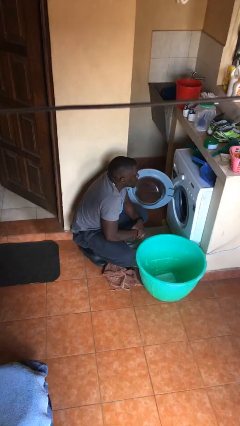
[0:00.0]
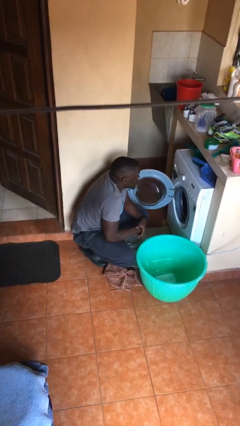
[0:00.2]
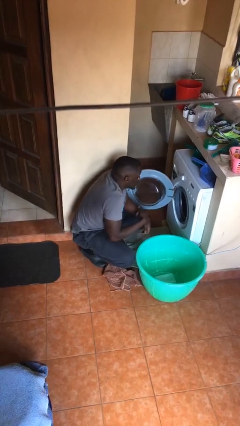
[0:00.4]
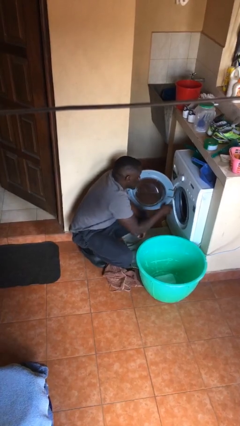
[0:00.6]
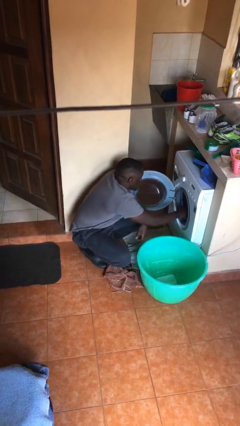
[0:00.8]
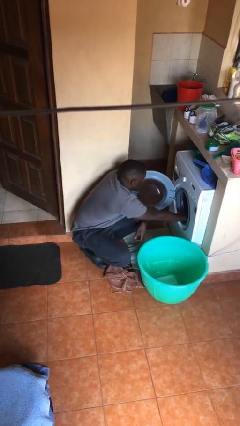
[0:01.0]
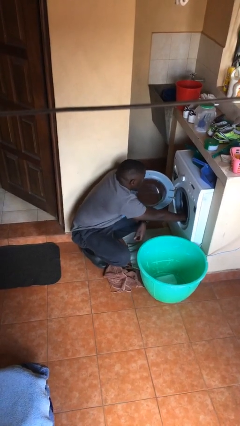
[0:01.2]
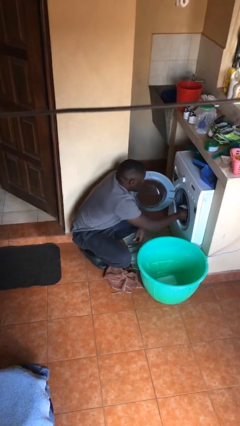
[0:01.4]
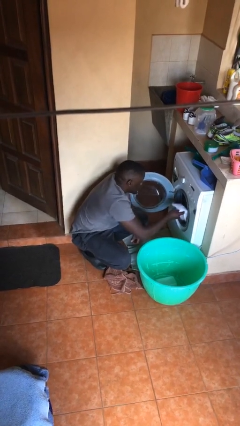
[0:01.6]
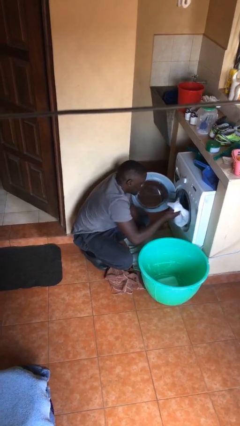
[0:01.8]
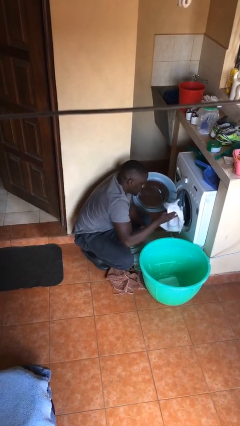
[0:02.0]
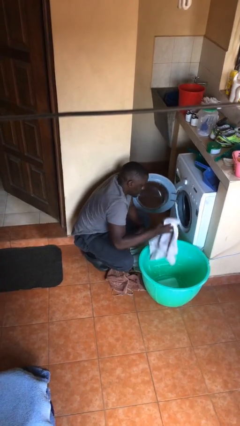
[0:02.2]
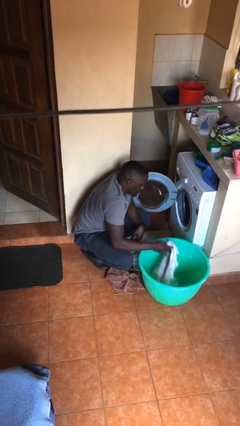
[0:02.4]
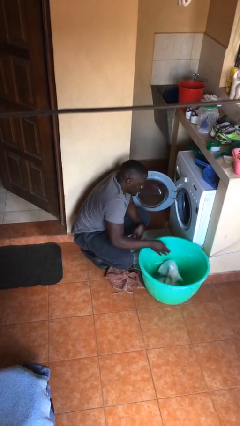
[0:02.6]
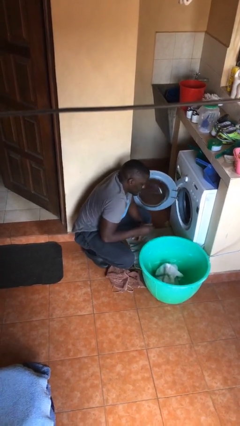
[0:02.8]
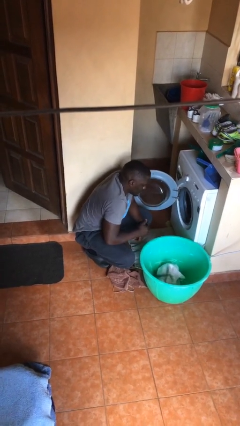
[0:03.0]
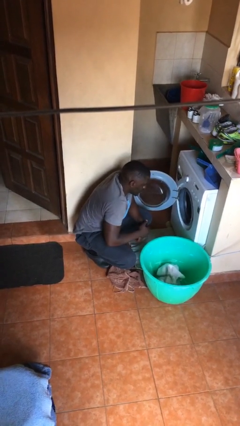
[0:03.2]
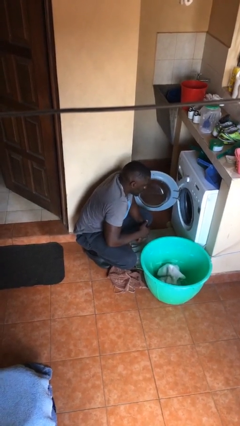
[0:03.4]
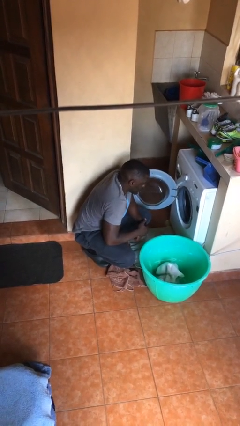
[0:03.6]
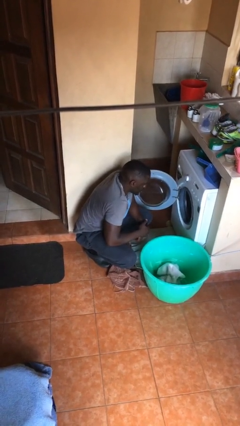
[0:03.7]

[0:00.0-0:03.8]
person unloads clotheswasher

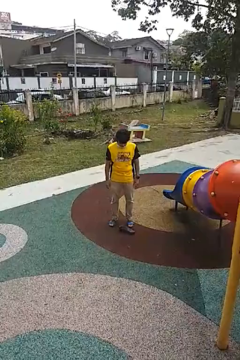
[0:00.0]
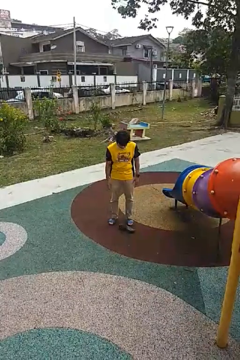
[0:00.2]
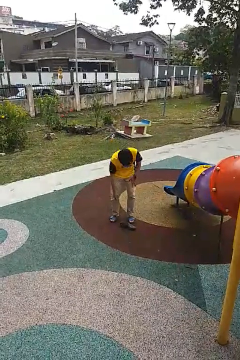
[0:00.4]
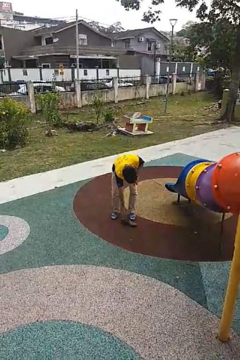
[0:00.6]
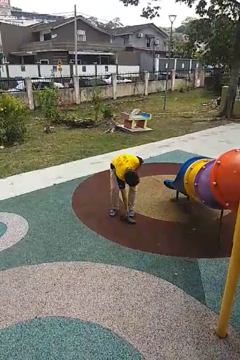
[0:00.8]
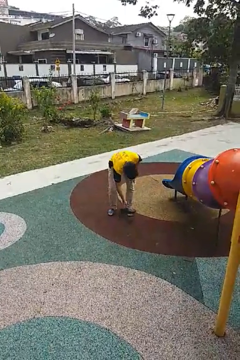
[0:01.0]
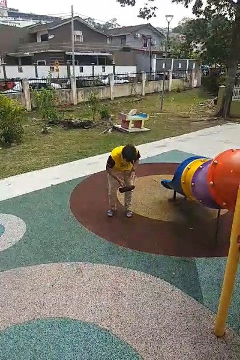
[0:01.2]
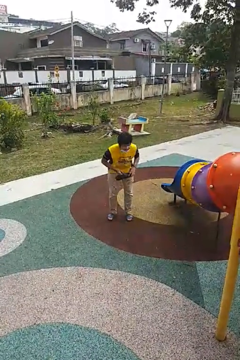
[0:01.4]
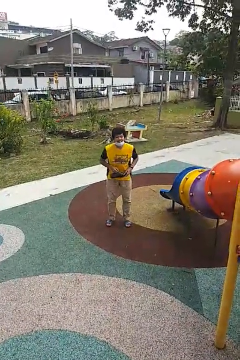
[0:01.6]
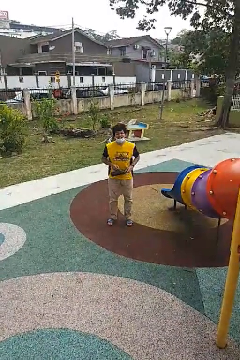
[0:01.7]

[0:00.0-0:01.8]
person picks up object from floor

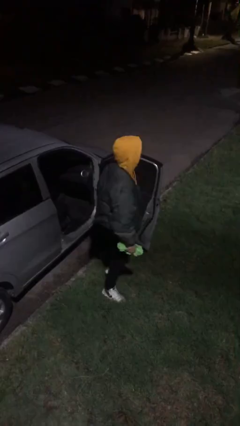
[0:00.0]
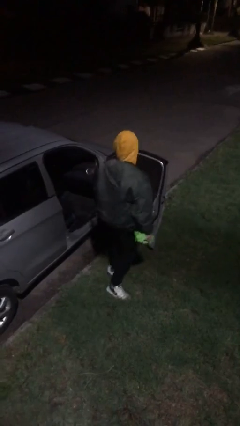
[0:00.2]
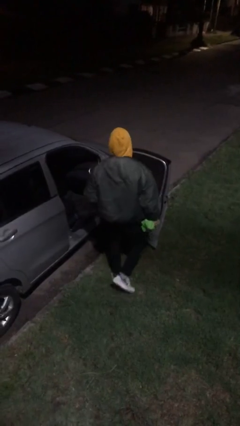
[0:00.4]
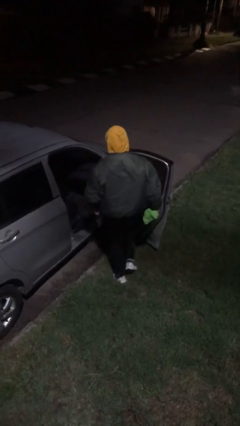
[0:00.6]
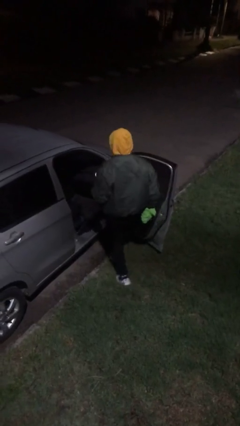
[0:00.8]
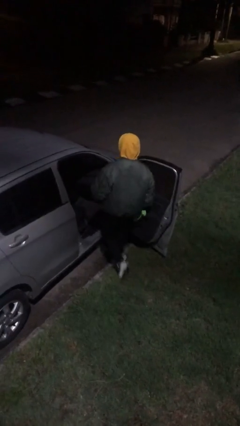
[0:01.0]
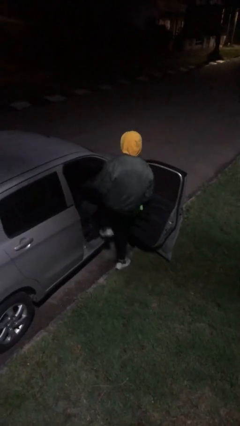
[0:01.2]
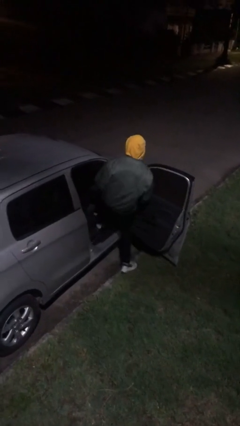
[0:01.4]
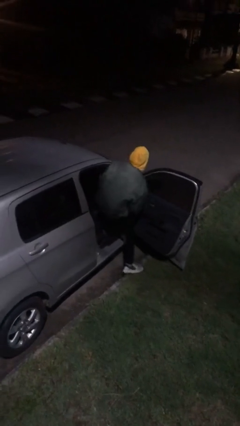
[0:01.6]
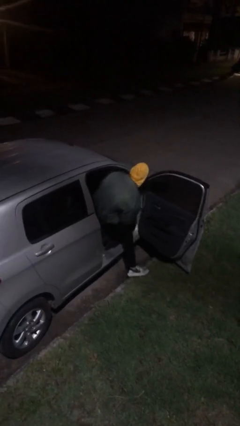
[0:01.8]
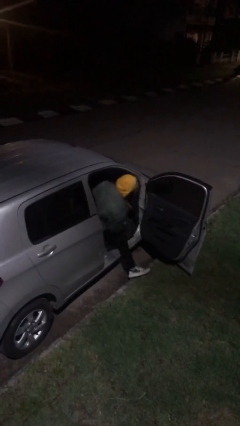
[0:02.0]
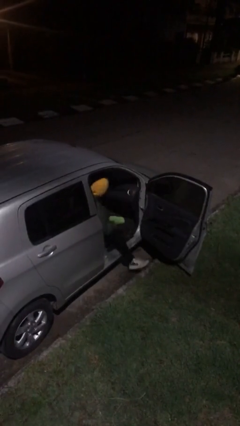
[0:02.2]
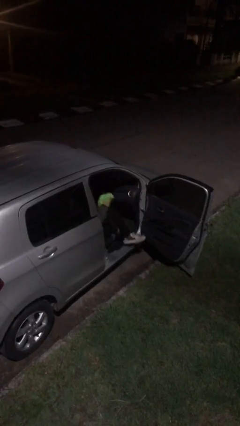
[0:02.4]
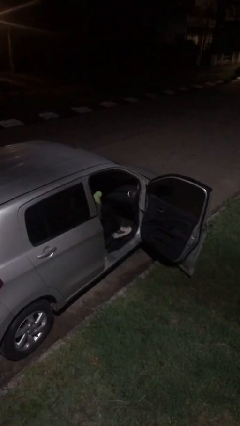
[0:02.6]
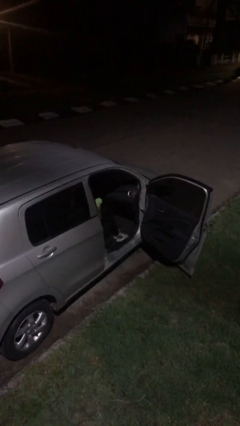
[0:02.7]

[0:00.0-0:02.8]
person enters car

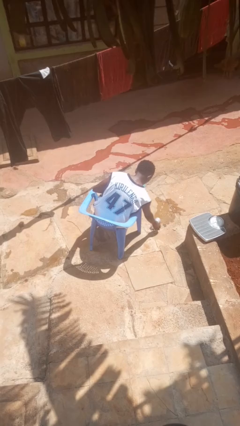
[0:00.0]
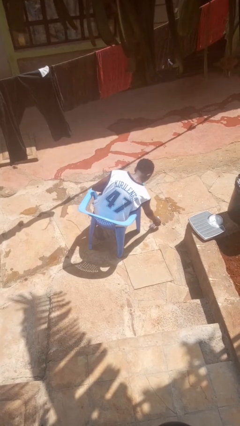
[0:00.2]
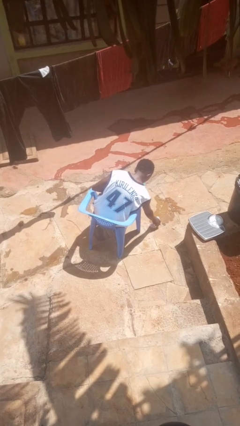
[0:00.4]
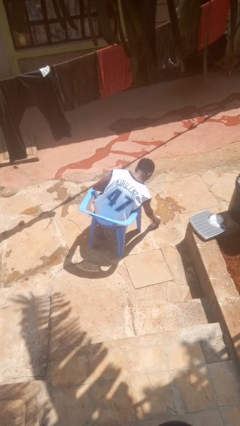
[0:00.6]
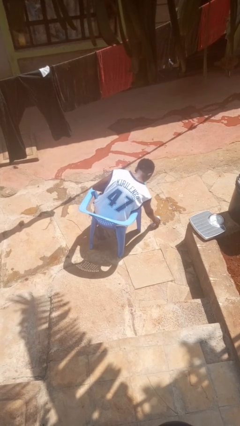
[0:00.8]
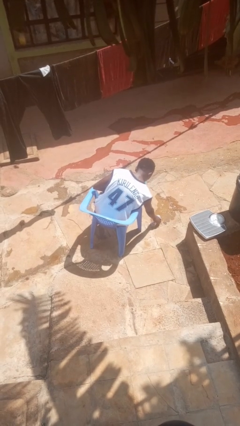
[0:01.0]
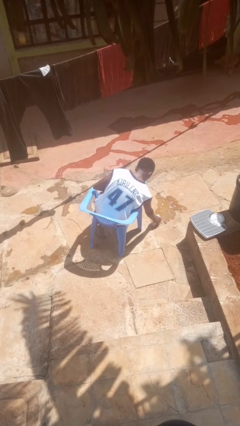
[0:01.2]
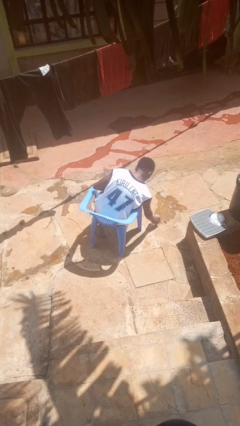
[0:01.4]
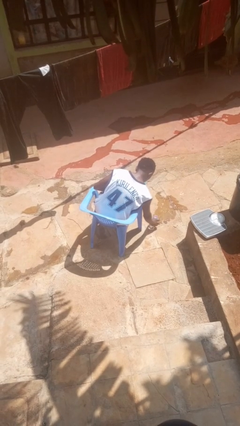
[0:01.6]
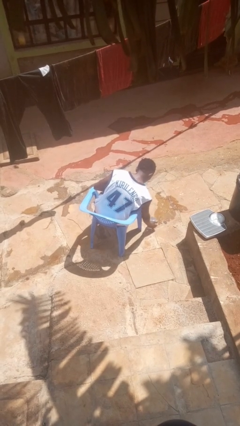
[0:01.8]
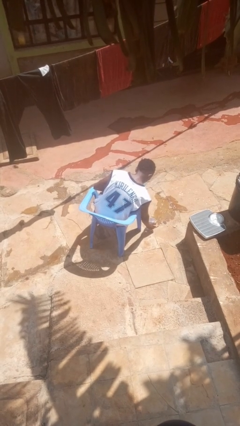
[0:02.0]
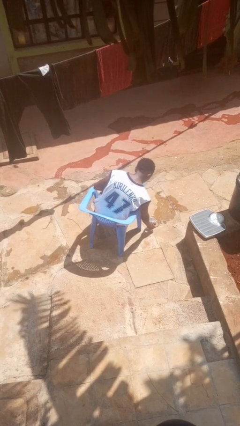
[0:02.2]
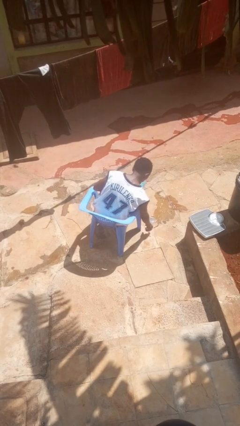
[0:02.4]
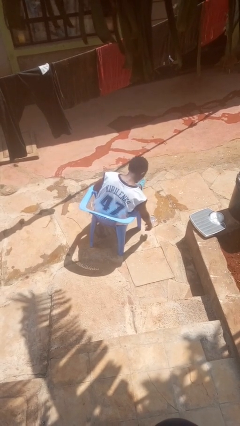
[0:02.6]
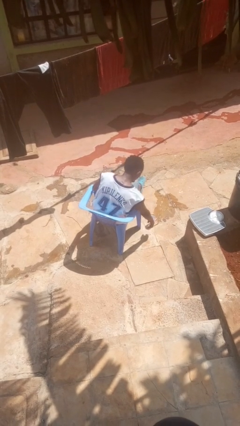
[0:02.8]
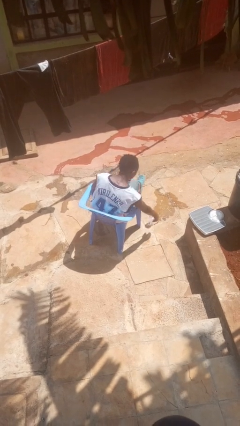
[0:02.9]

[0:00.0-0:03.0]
person sets upright glass

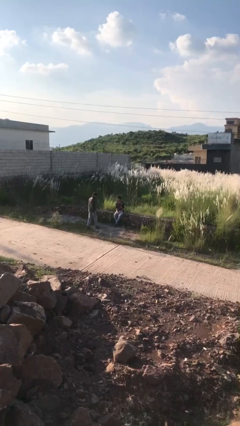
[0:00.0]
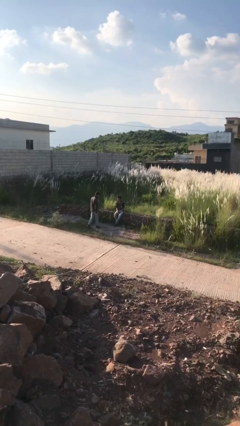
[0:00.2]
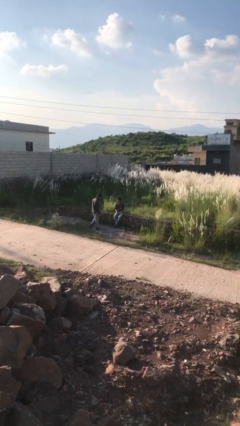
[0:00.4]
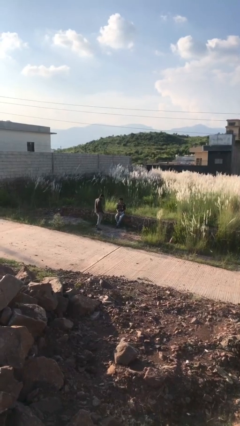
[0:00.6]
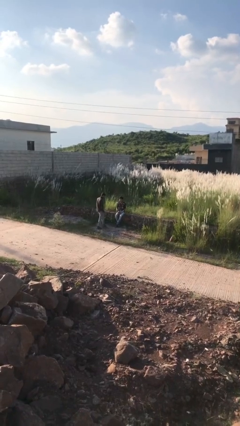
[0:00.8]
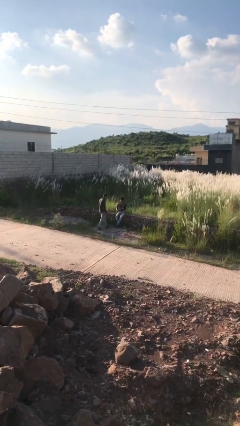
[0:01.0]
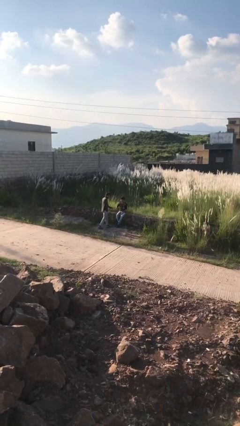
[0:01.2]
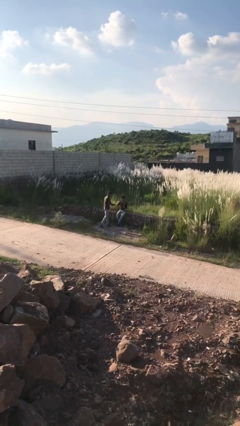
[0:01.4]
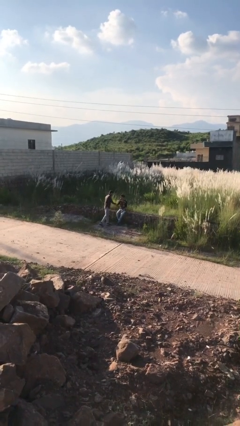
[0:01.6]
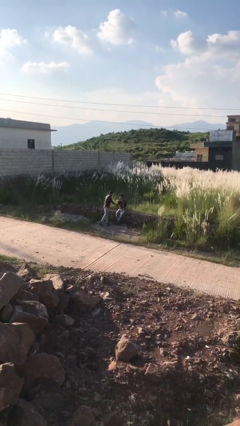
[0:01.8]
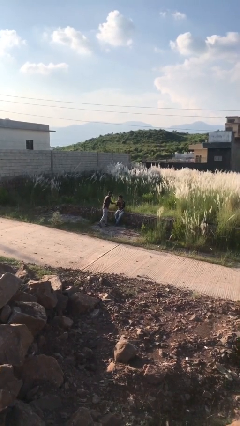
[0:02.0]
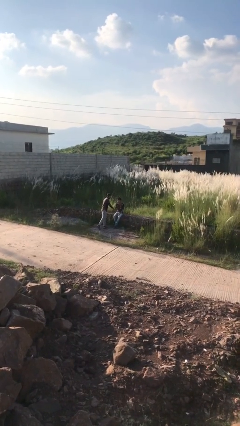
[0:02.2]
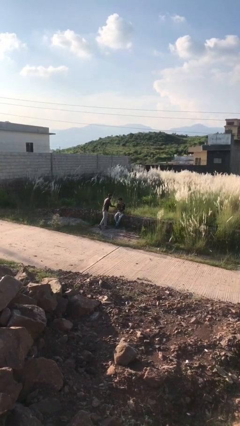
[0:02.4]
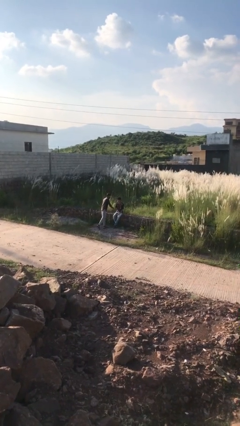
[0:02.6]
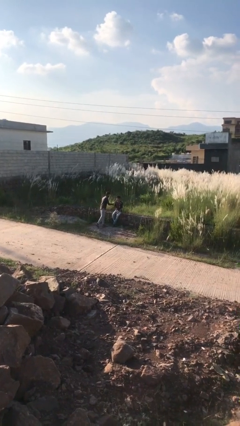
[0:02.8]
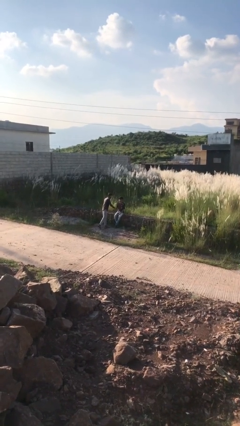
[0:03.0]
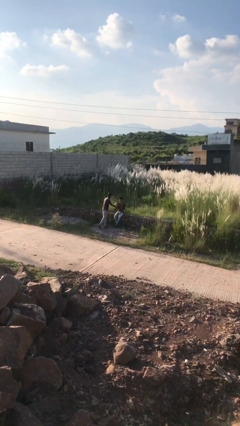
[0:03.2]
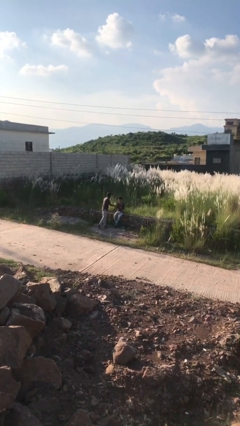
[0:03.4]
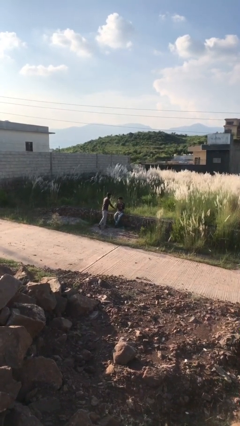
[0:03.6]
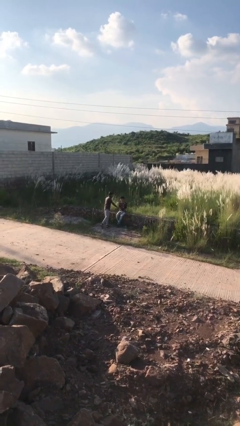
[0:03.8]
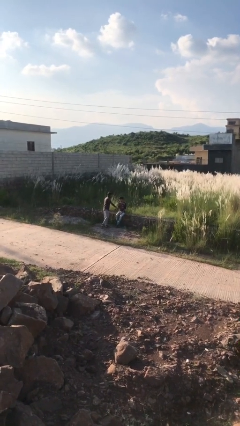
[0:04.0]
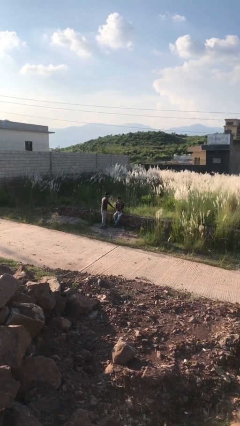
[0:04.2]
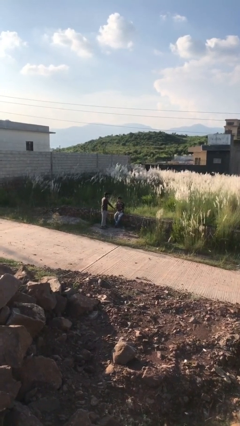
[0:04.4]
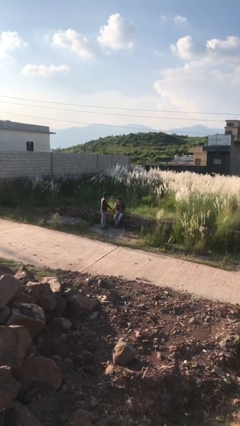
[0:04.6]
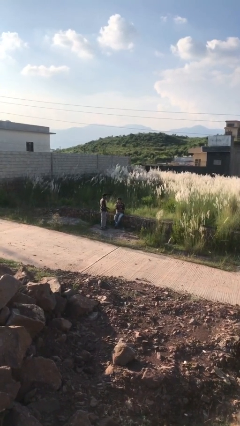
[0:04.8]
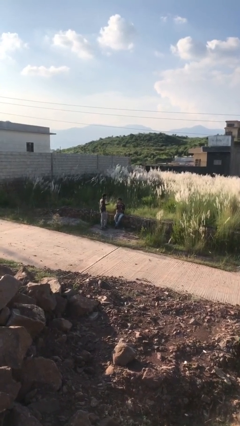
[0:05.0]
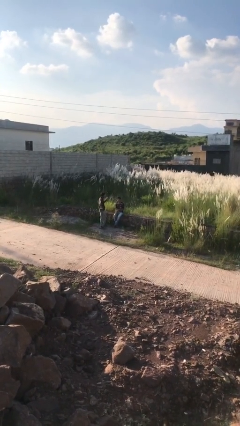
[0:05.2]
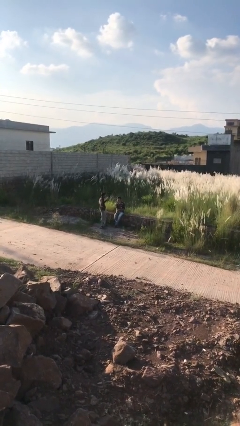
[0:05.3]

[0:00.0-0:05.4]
person shakes hand

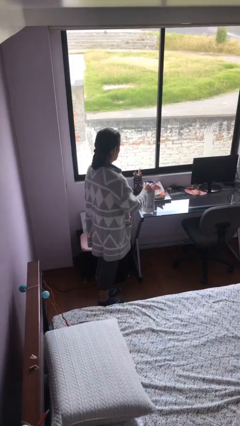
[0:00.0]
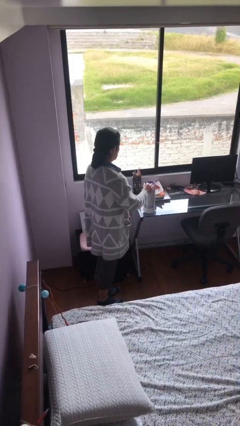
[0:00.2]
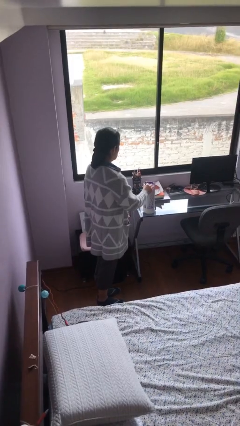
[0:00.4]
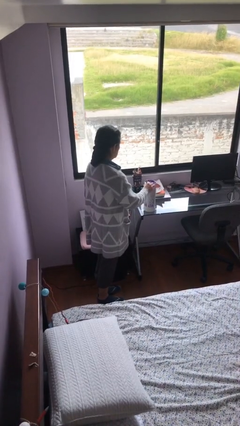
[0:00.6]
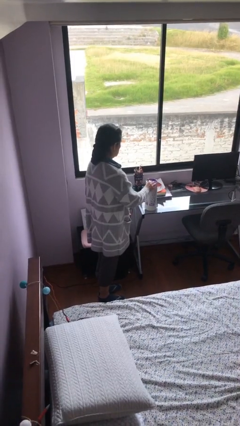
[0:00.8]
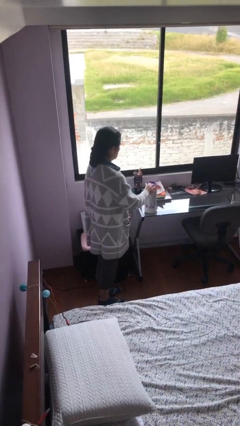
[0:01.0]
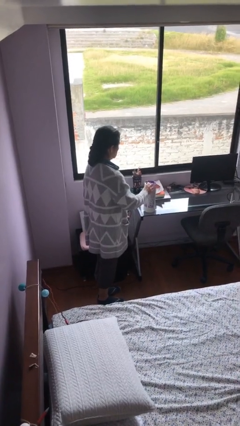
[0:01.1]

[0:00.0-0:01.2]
person puts down object on table
